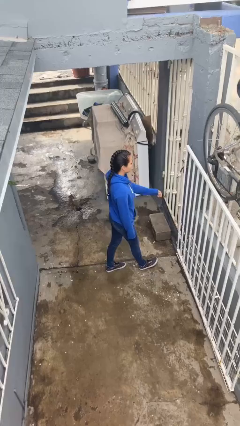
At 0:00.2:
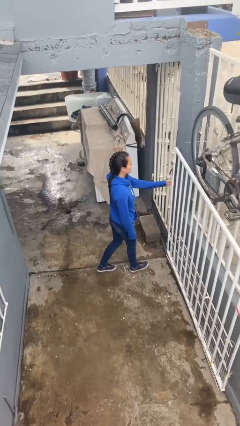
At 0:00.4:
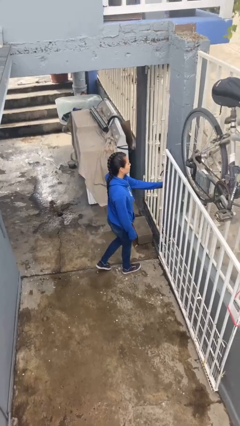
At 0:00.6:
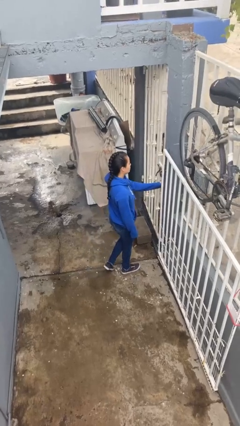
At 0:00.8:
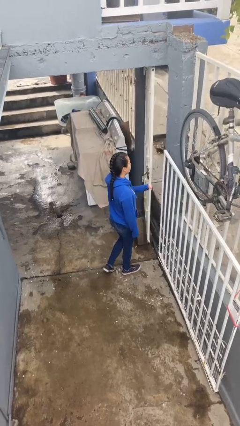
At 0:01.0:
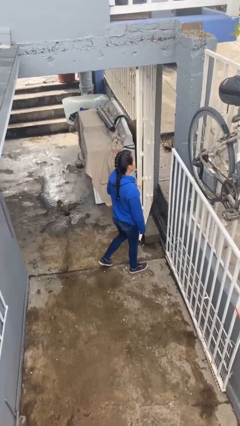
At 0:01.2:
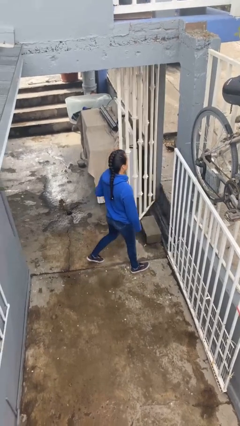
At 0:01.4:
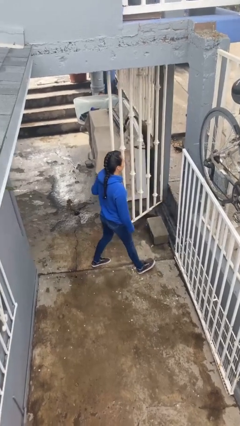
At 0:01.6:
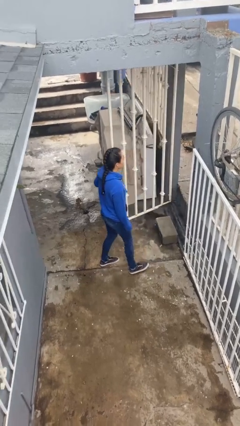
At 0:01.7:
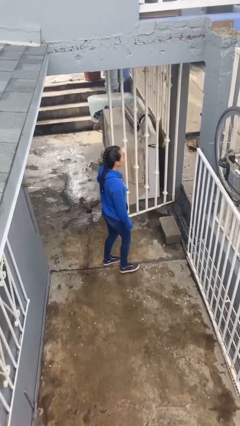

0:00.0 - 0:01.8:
person opens facility door

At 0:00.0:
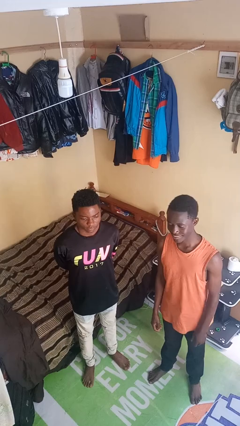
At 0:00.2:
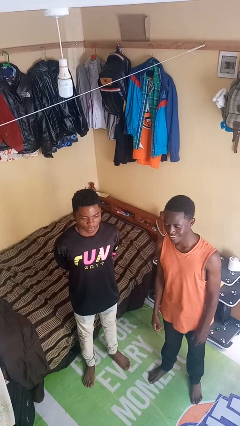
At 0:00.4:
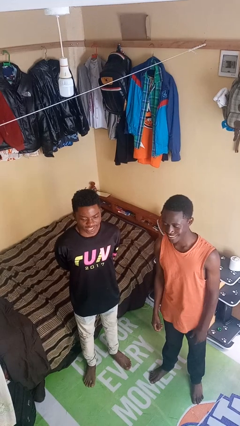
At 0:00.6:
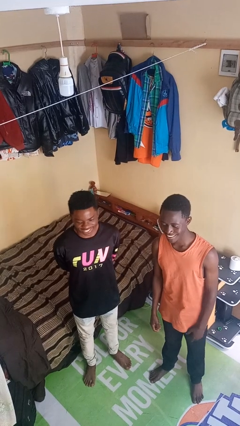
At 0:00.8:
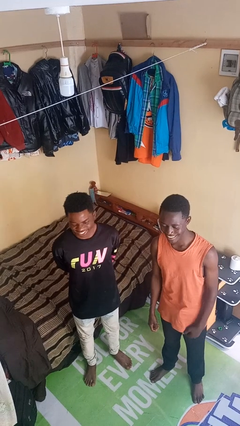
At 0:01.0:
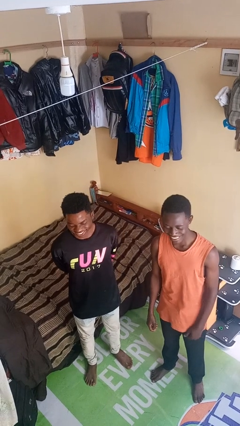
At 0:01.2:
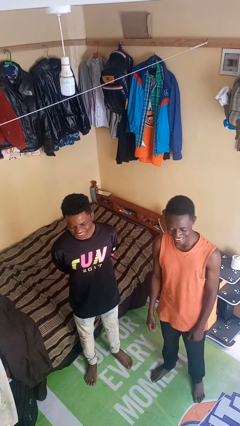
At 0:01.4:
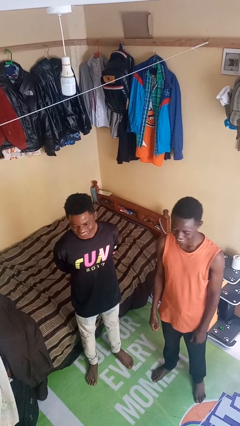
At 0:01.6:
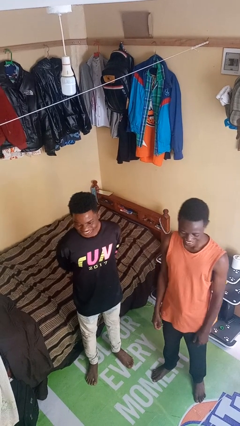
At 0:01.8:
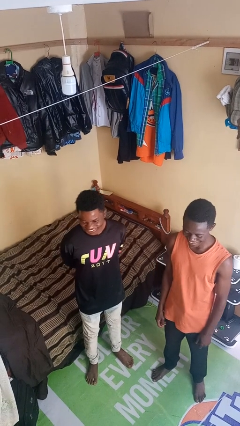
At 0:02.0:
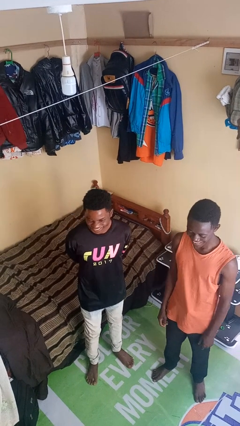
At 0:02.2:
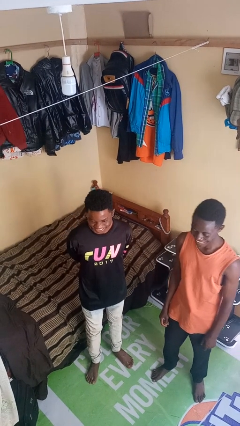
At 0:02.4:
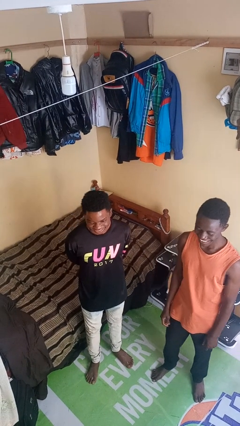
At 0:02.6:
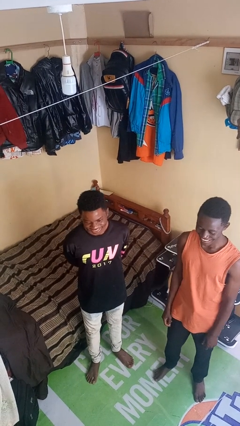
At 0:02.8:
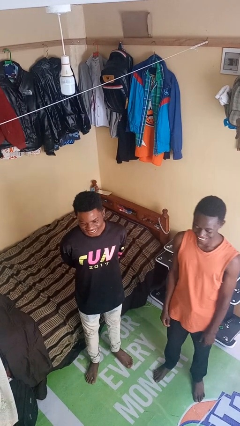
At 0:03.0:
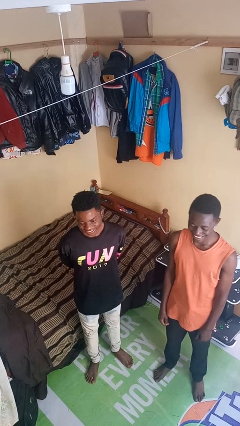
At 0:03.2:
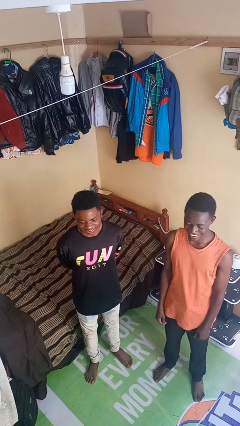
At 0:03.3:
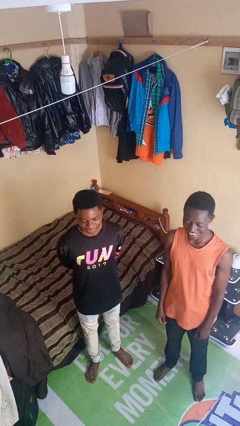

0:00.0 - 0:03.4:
person laughs with person

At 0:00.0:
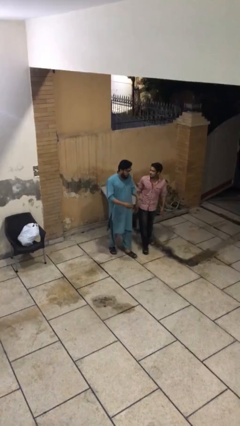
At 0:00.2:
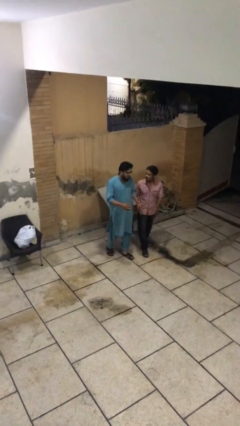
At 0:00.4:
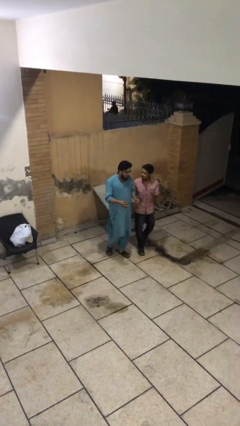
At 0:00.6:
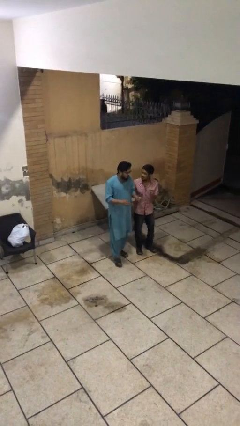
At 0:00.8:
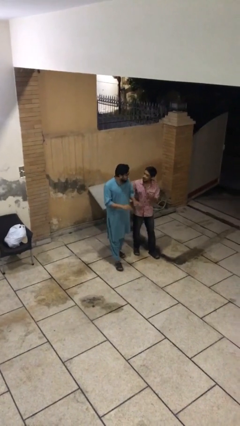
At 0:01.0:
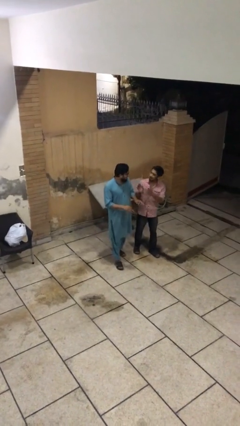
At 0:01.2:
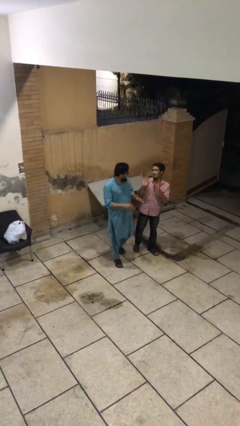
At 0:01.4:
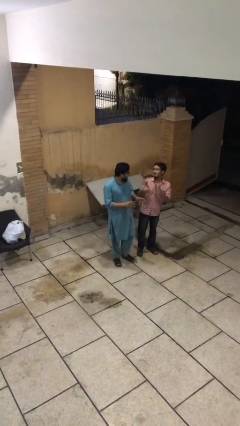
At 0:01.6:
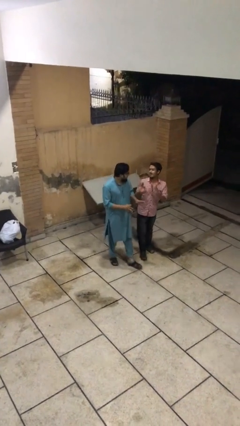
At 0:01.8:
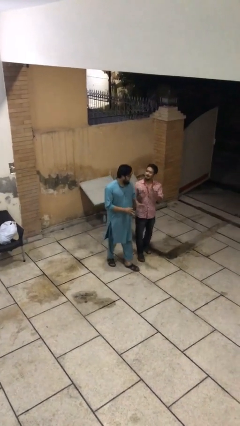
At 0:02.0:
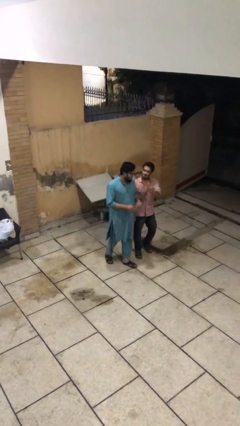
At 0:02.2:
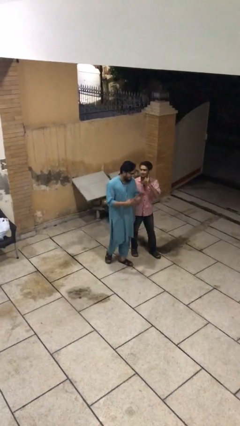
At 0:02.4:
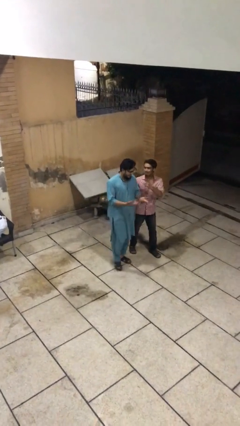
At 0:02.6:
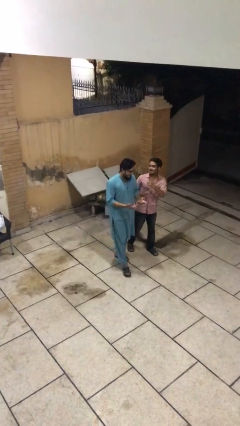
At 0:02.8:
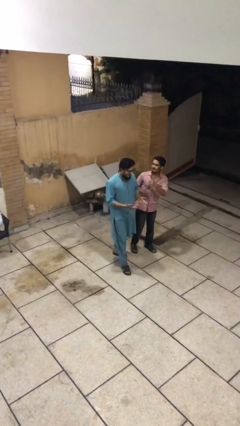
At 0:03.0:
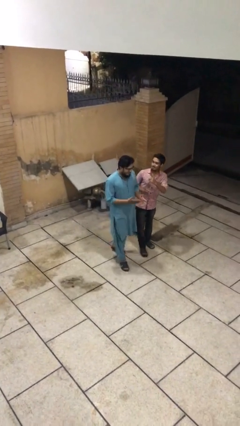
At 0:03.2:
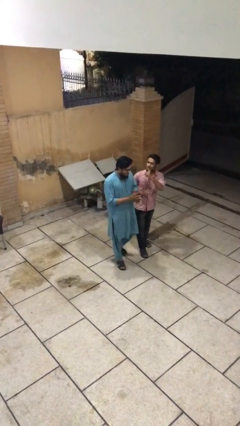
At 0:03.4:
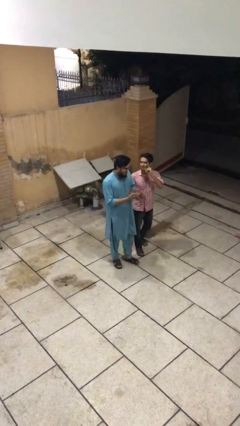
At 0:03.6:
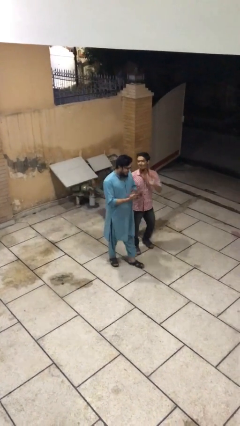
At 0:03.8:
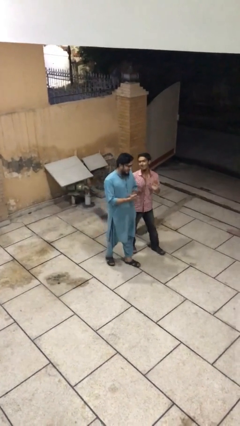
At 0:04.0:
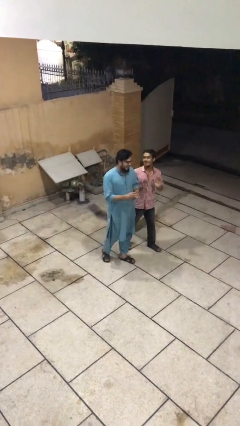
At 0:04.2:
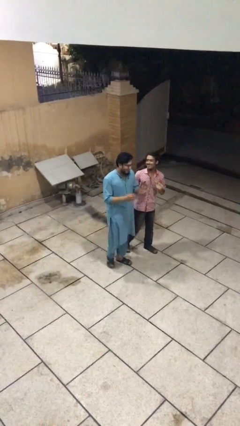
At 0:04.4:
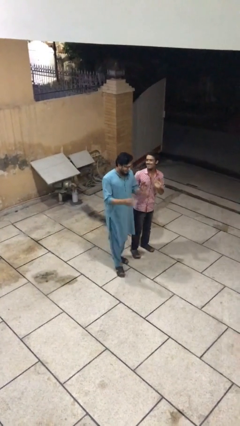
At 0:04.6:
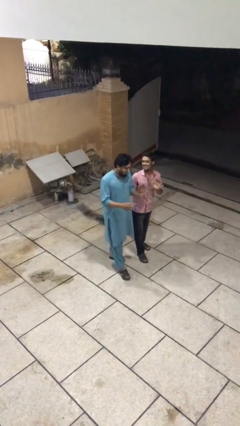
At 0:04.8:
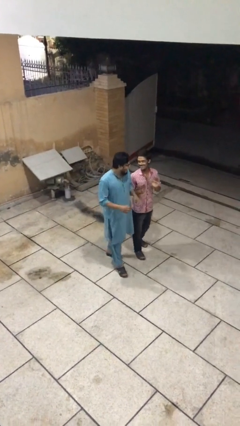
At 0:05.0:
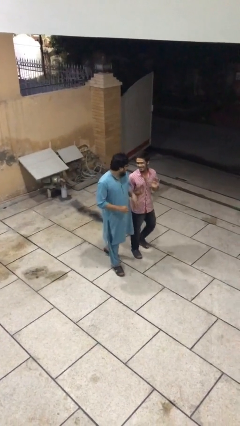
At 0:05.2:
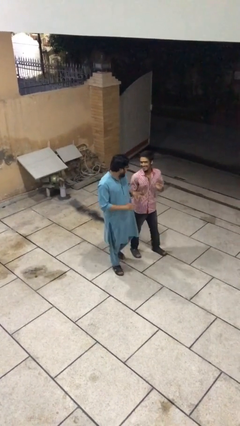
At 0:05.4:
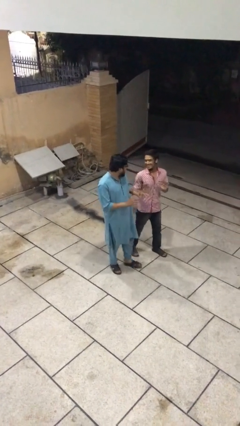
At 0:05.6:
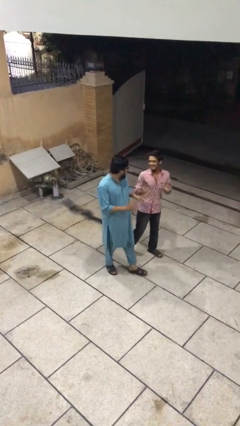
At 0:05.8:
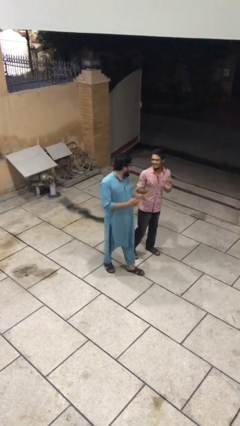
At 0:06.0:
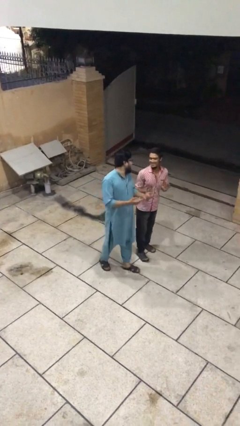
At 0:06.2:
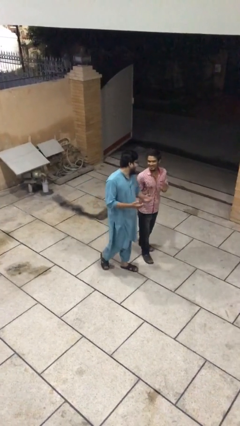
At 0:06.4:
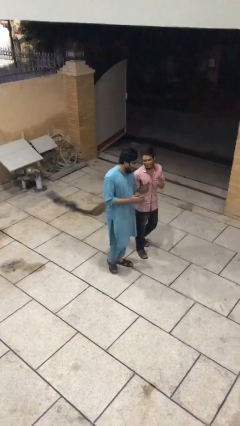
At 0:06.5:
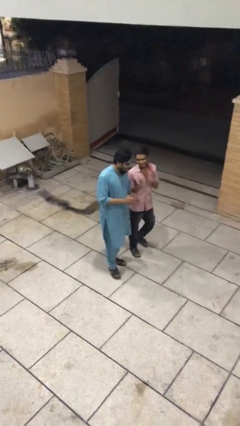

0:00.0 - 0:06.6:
person talks to person

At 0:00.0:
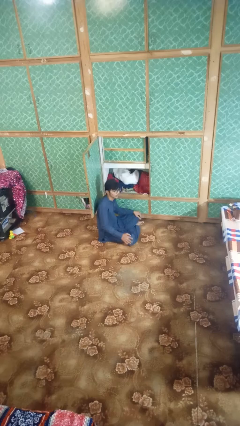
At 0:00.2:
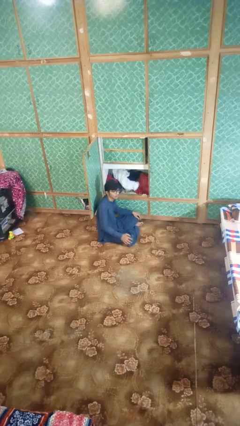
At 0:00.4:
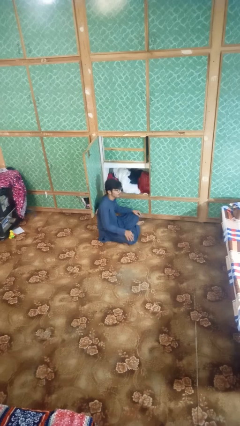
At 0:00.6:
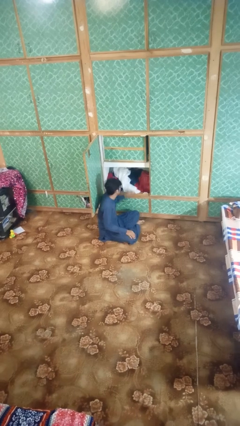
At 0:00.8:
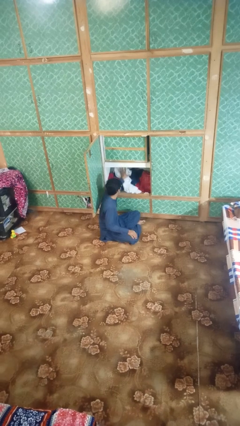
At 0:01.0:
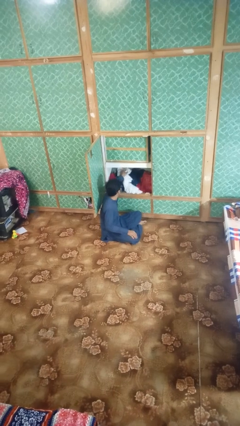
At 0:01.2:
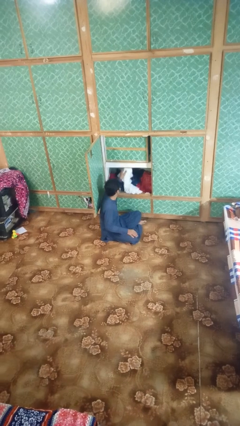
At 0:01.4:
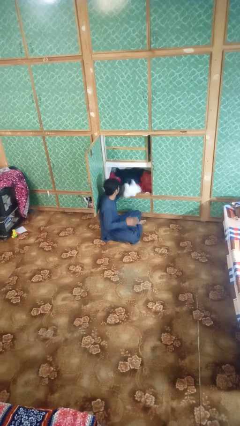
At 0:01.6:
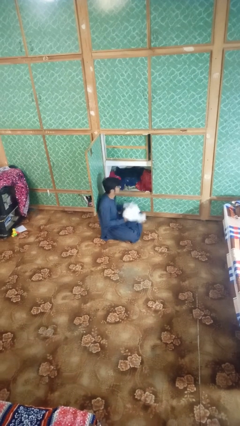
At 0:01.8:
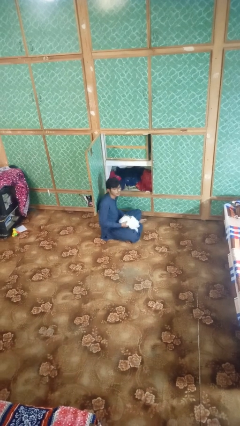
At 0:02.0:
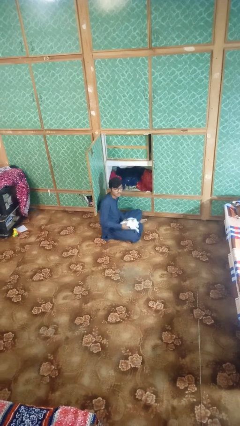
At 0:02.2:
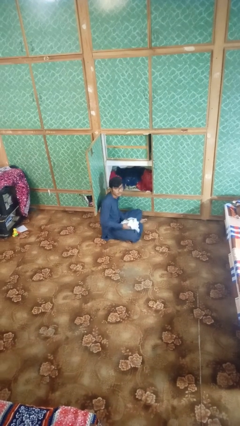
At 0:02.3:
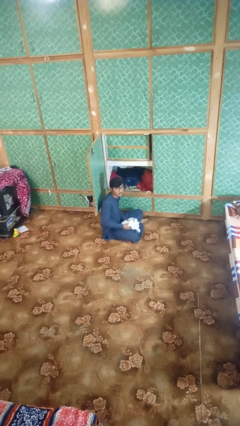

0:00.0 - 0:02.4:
person takes clothes from dresser

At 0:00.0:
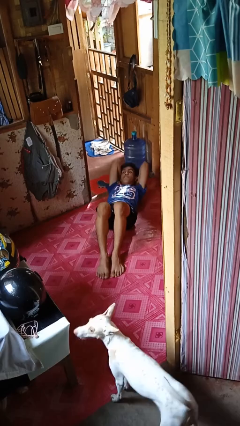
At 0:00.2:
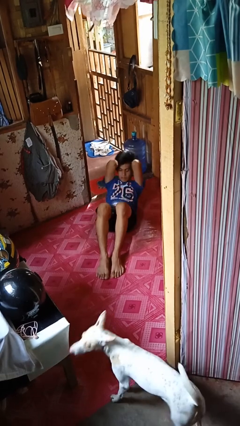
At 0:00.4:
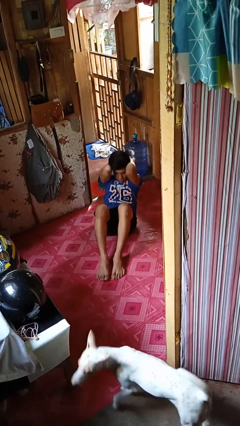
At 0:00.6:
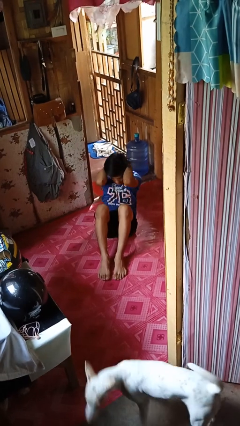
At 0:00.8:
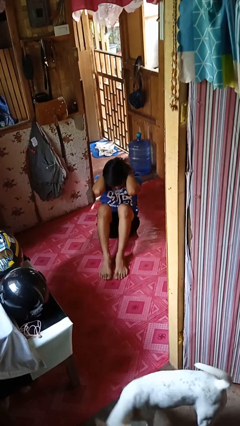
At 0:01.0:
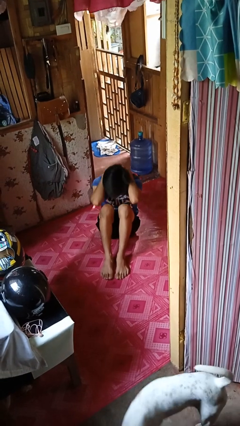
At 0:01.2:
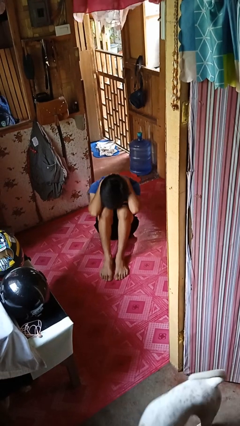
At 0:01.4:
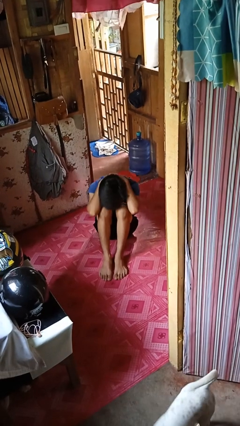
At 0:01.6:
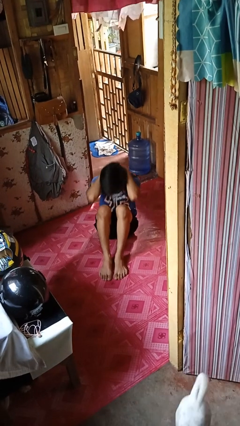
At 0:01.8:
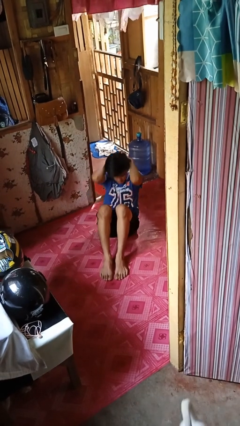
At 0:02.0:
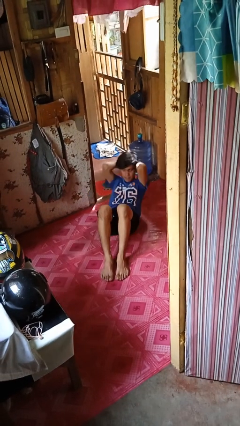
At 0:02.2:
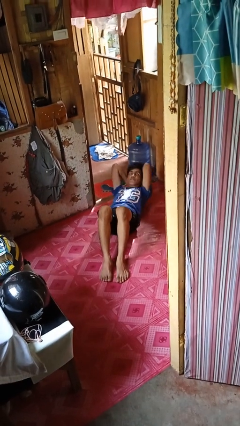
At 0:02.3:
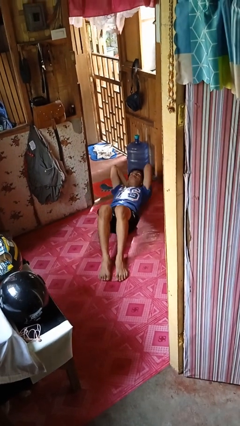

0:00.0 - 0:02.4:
person exercises with situp

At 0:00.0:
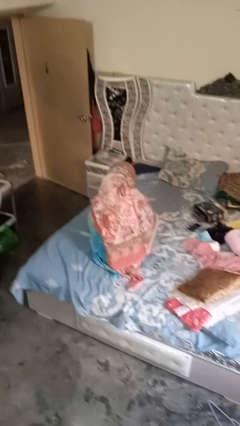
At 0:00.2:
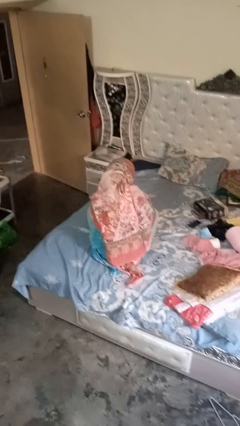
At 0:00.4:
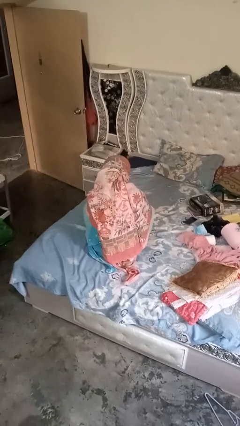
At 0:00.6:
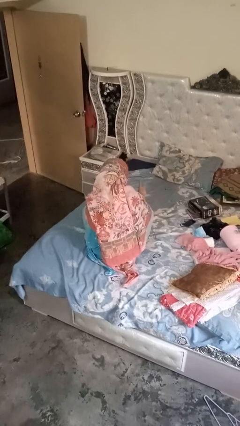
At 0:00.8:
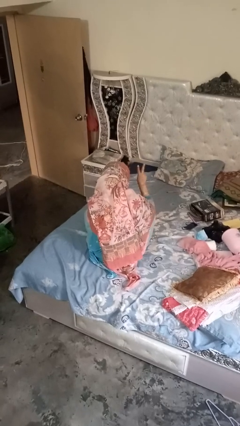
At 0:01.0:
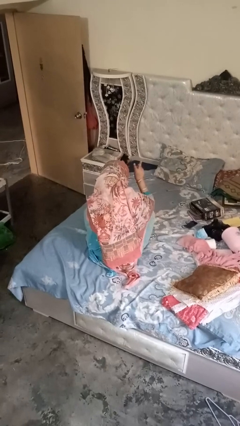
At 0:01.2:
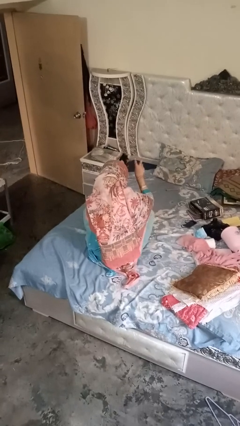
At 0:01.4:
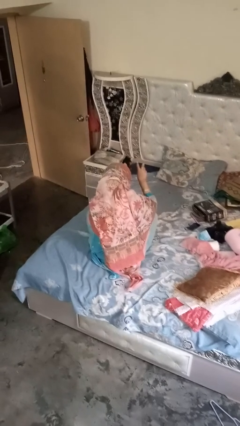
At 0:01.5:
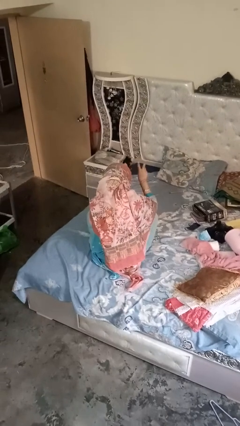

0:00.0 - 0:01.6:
person gestures be quiet
